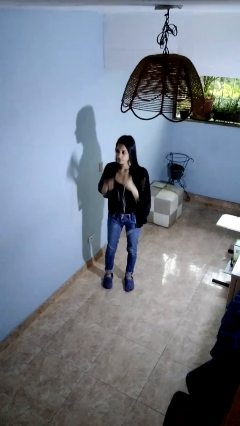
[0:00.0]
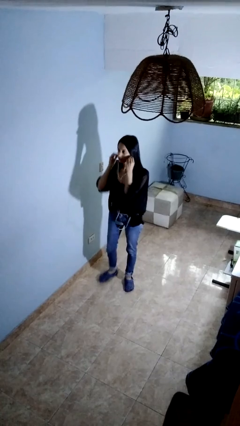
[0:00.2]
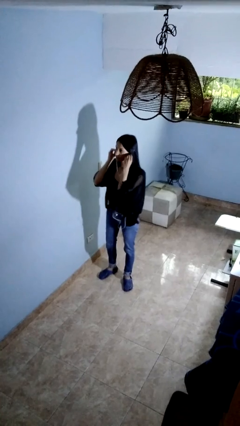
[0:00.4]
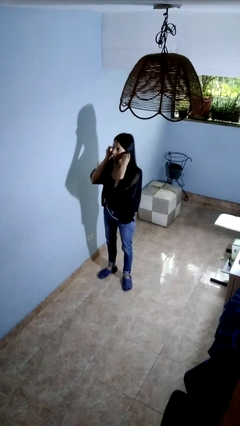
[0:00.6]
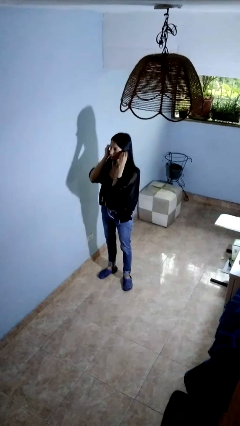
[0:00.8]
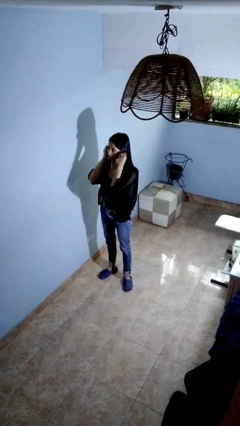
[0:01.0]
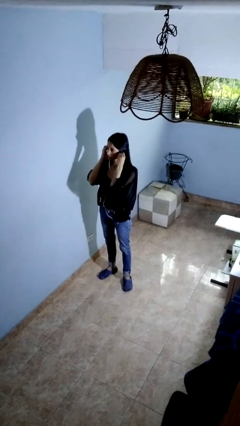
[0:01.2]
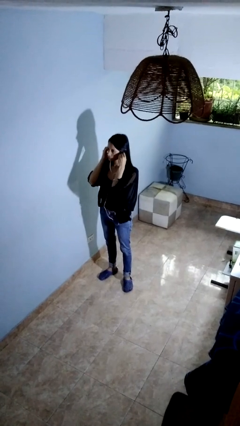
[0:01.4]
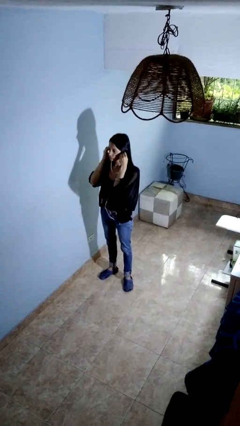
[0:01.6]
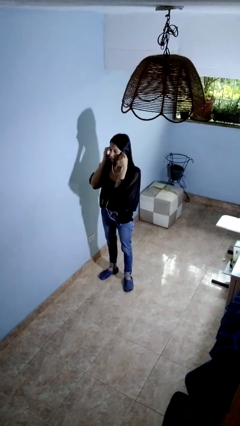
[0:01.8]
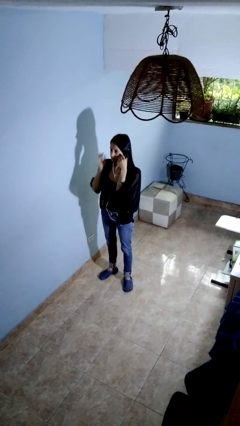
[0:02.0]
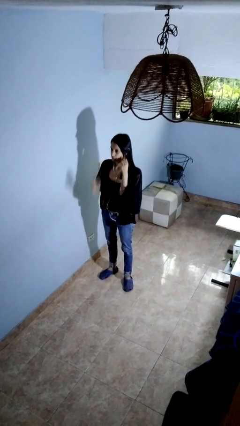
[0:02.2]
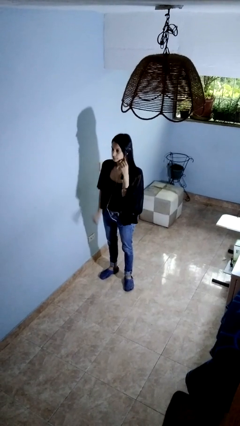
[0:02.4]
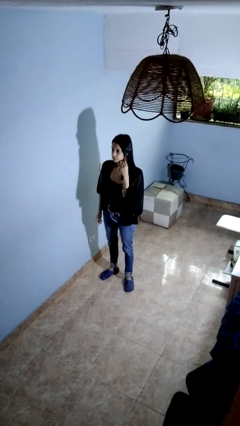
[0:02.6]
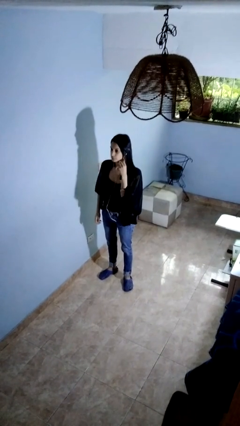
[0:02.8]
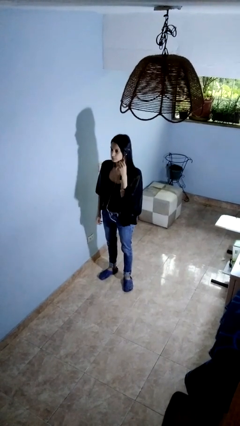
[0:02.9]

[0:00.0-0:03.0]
person puts on headphones

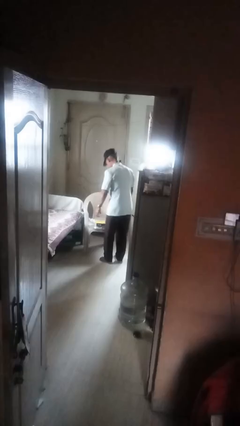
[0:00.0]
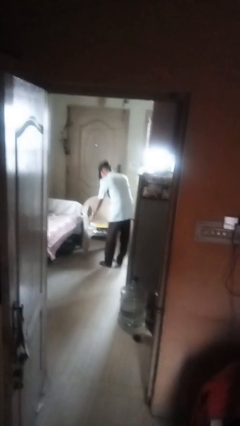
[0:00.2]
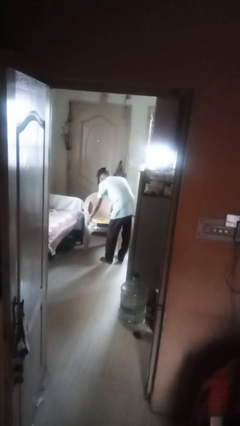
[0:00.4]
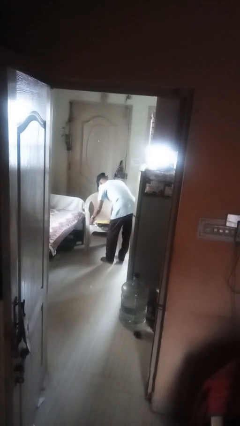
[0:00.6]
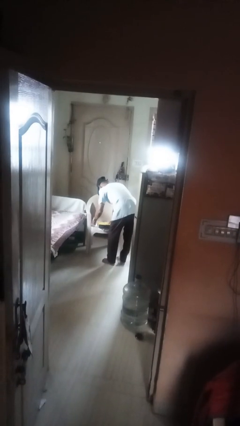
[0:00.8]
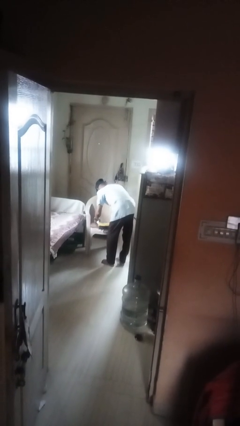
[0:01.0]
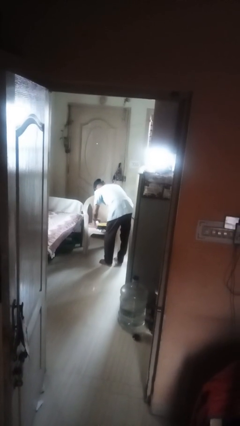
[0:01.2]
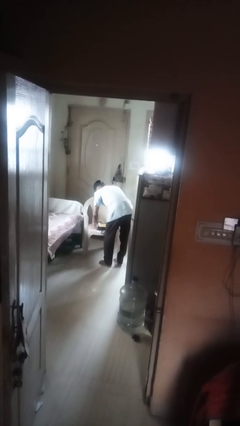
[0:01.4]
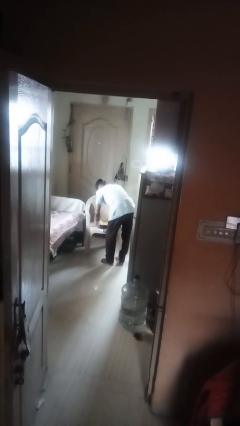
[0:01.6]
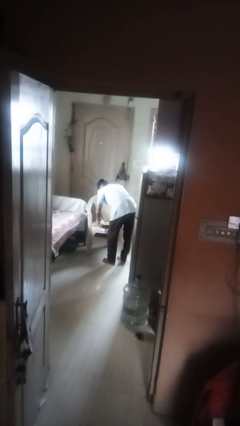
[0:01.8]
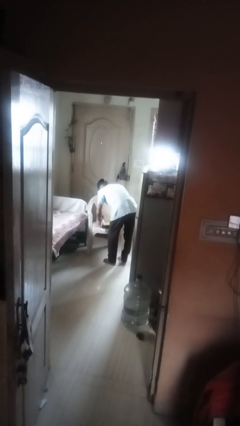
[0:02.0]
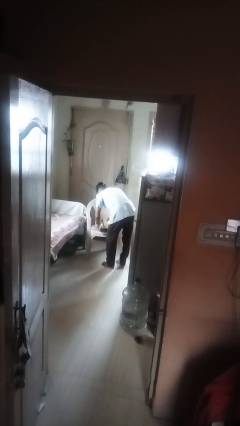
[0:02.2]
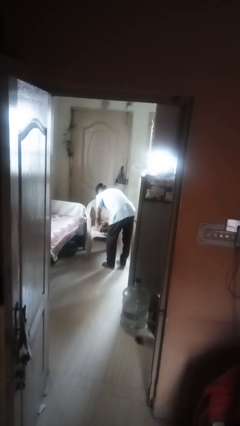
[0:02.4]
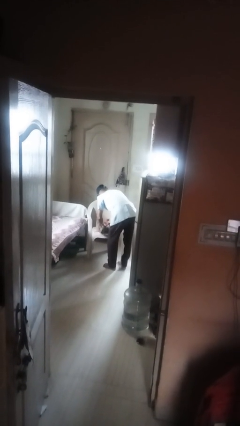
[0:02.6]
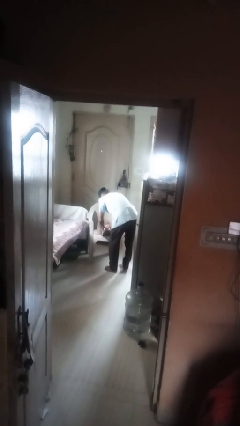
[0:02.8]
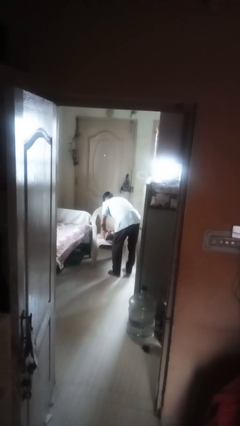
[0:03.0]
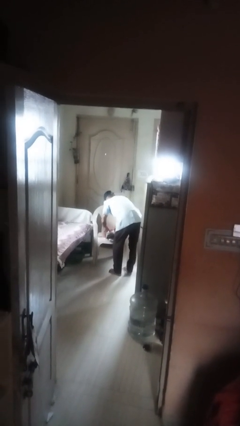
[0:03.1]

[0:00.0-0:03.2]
person wraps box

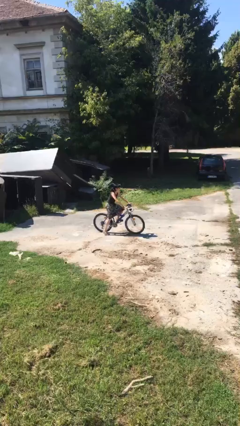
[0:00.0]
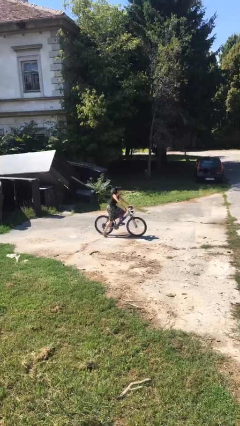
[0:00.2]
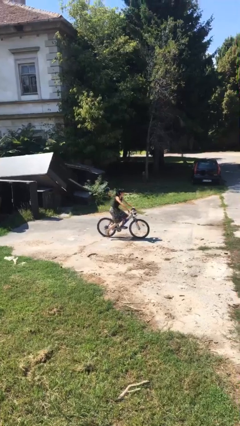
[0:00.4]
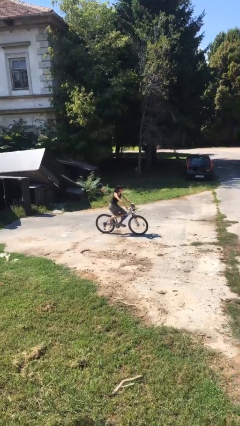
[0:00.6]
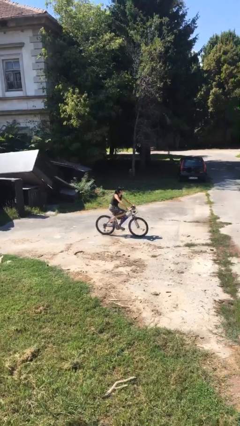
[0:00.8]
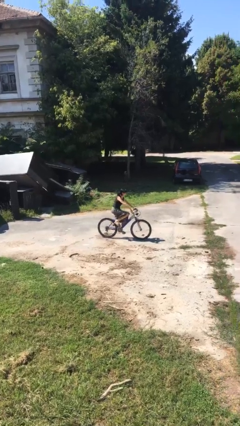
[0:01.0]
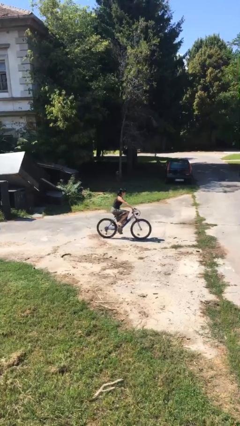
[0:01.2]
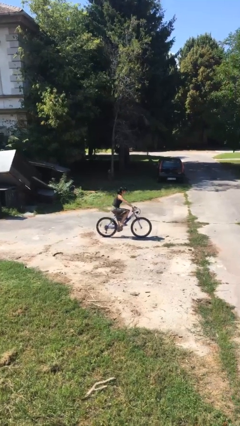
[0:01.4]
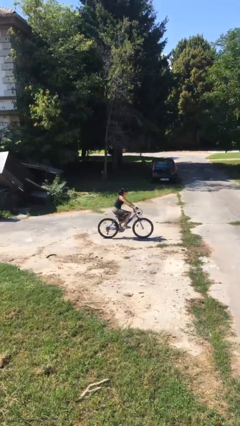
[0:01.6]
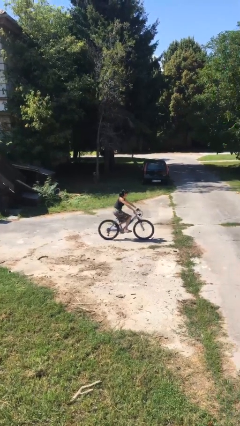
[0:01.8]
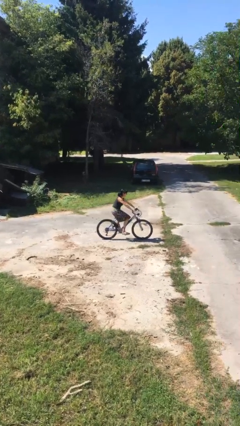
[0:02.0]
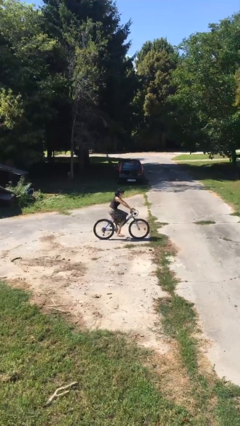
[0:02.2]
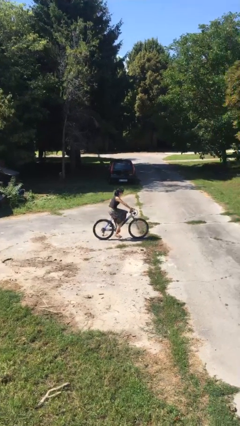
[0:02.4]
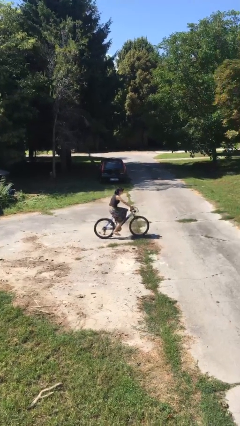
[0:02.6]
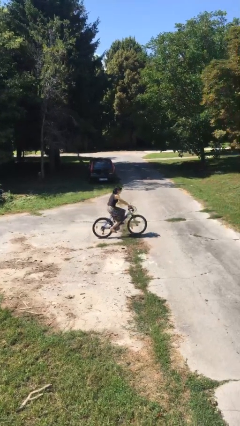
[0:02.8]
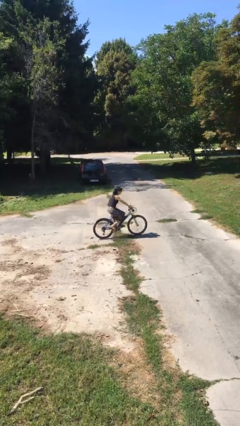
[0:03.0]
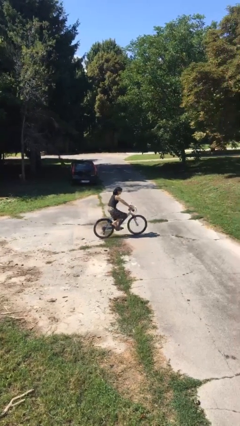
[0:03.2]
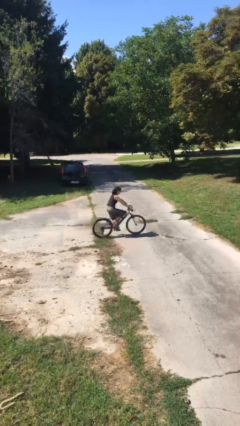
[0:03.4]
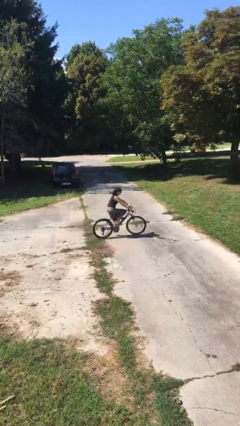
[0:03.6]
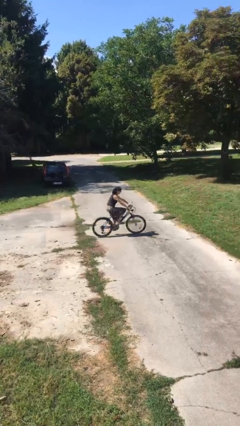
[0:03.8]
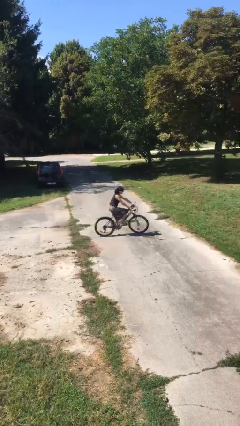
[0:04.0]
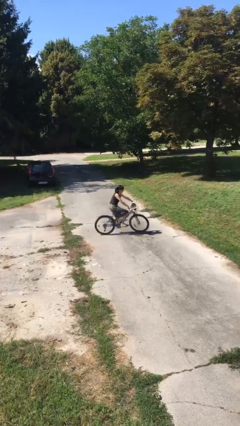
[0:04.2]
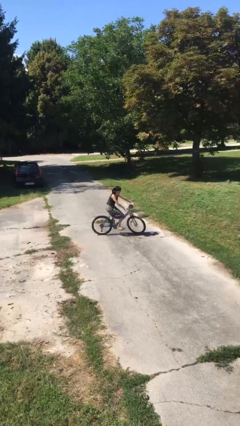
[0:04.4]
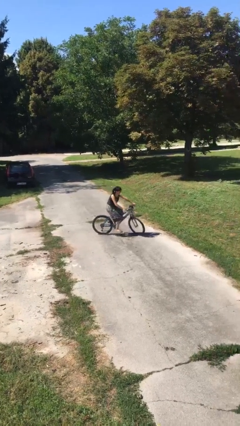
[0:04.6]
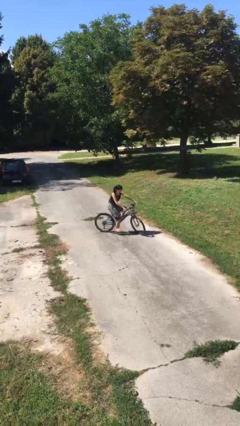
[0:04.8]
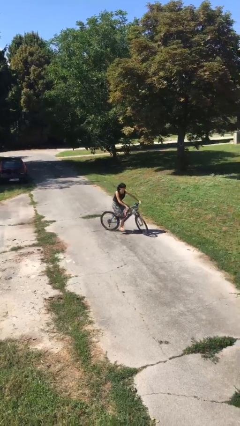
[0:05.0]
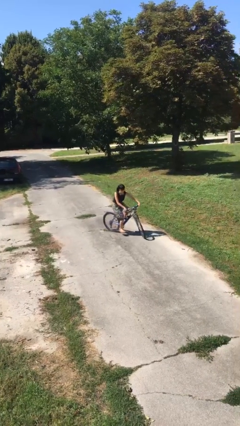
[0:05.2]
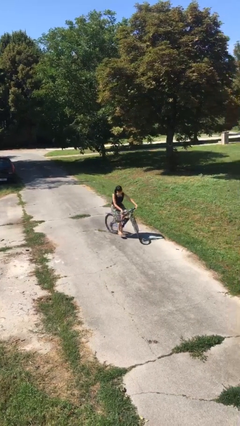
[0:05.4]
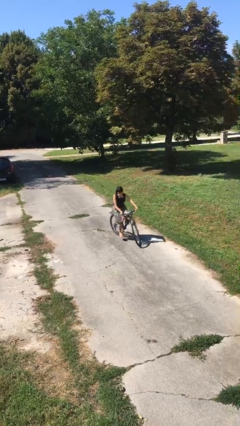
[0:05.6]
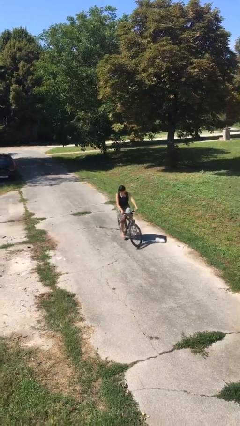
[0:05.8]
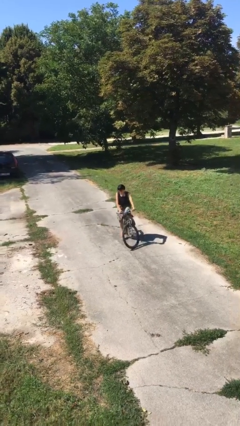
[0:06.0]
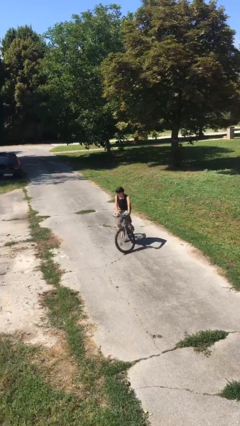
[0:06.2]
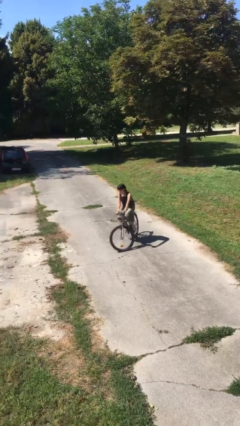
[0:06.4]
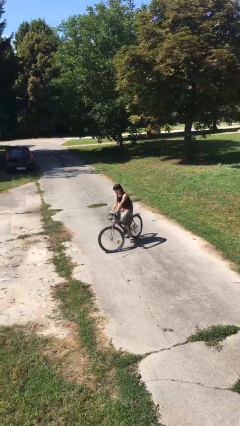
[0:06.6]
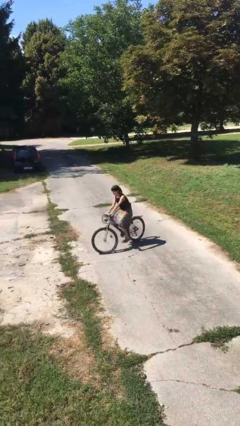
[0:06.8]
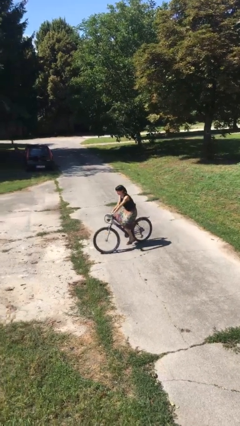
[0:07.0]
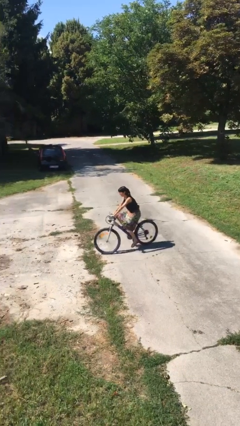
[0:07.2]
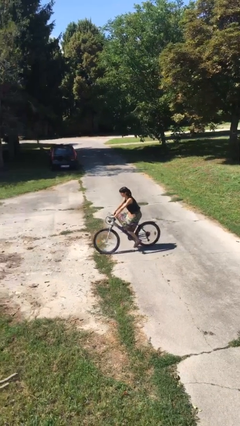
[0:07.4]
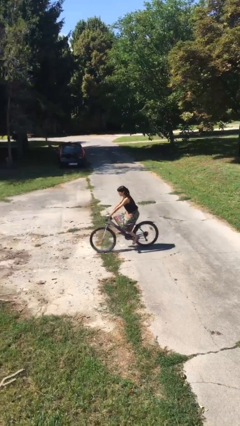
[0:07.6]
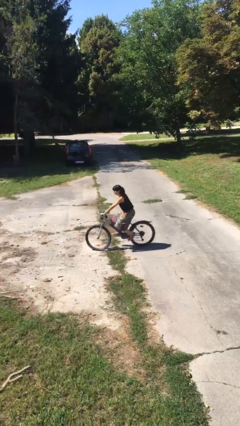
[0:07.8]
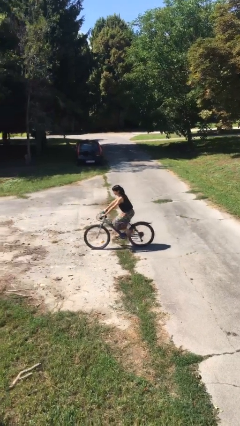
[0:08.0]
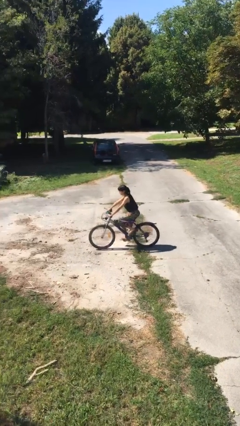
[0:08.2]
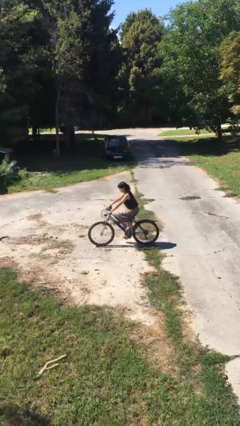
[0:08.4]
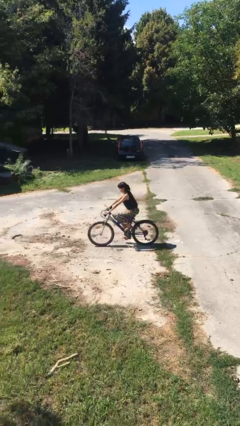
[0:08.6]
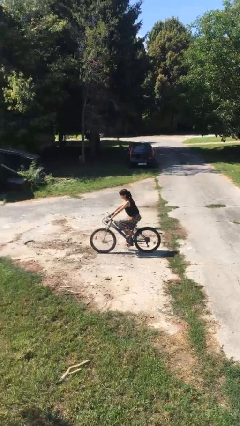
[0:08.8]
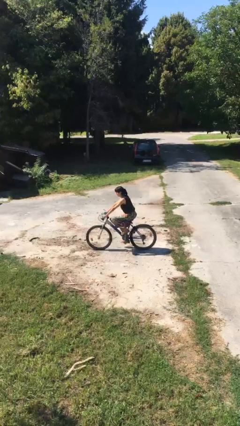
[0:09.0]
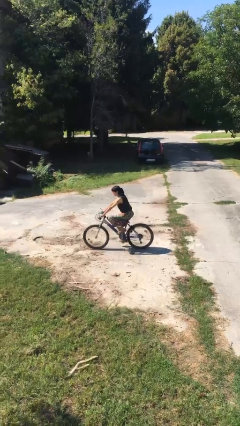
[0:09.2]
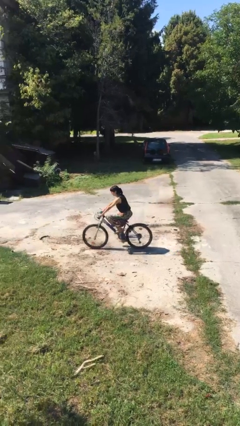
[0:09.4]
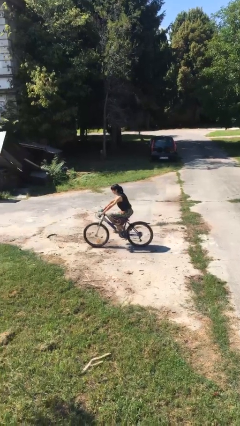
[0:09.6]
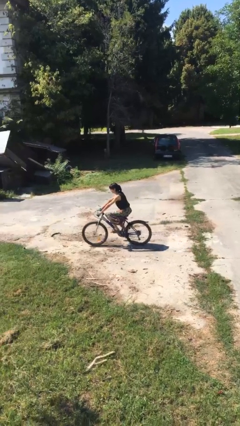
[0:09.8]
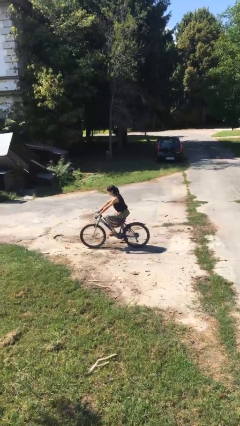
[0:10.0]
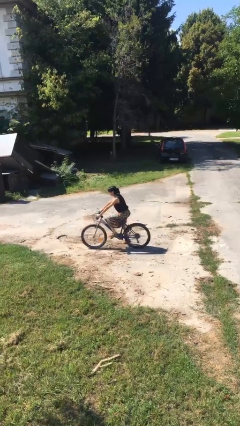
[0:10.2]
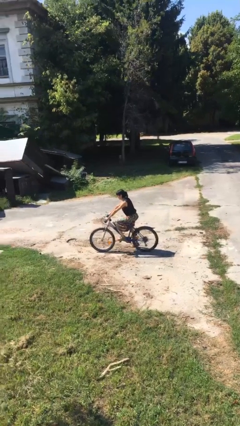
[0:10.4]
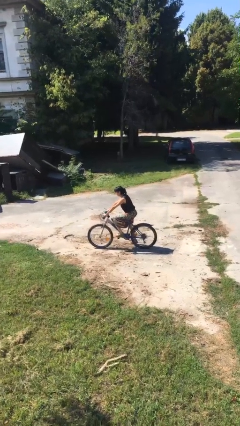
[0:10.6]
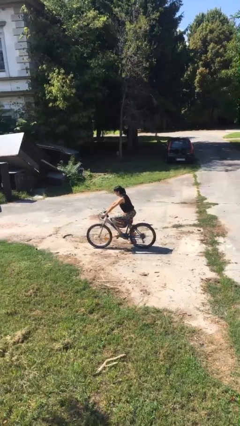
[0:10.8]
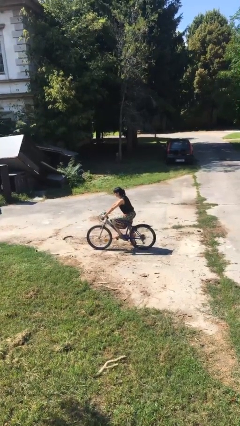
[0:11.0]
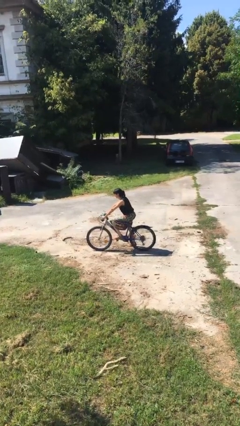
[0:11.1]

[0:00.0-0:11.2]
person rides bicycle

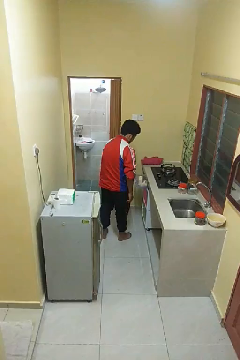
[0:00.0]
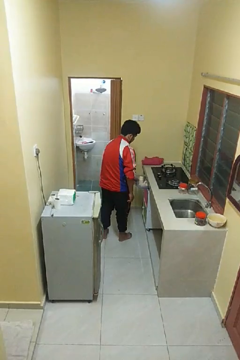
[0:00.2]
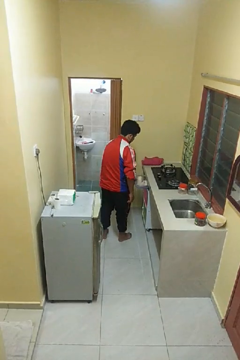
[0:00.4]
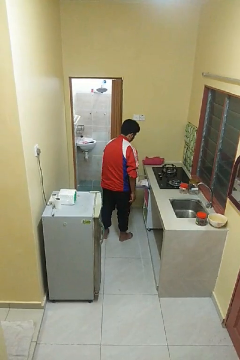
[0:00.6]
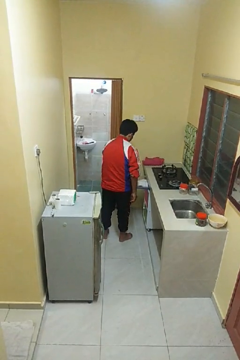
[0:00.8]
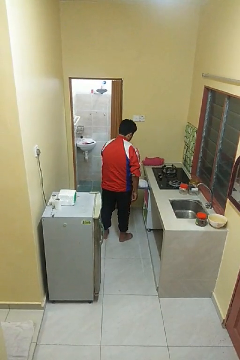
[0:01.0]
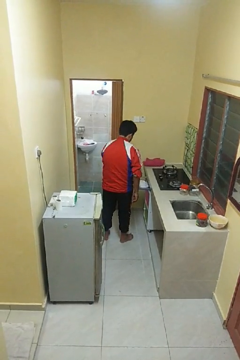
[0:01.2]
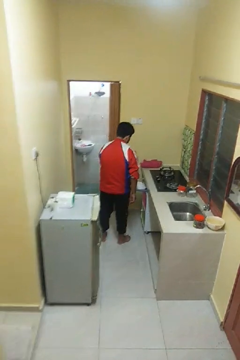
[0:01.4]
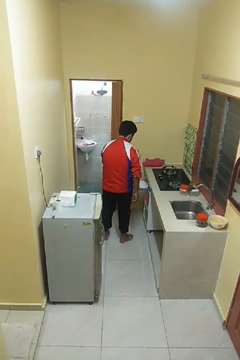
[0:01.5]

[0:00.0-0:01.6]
person opens kitchen drawer
